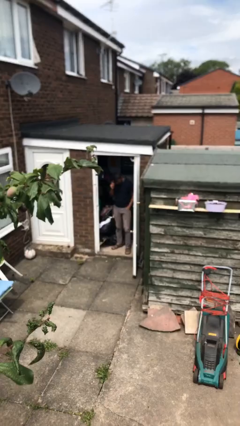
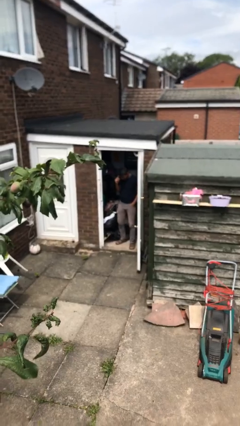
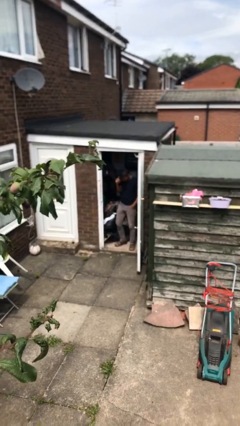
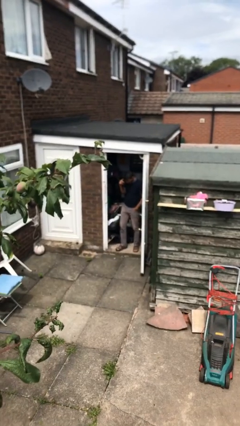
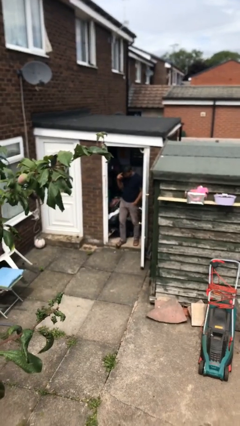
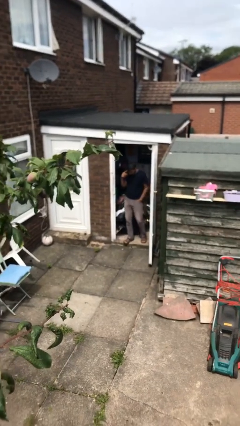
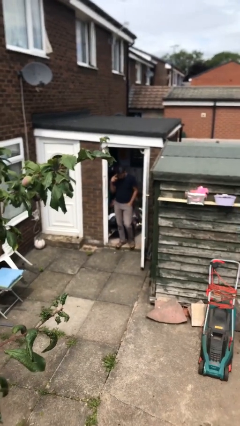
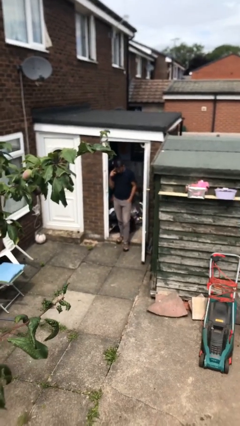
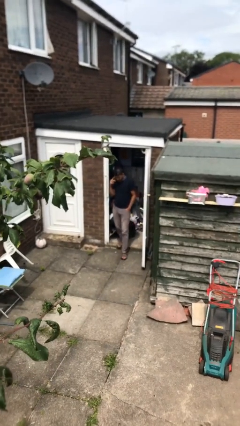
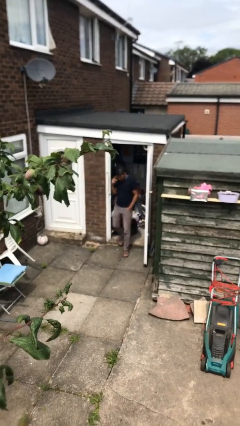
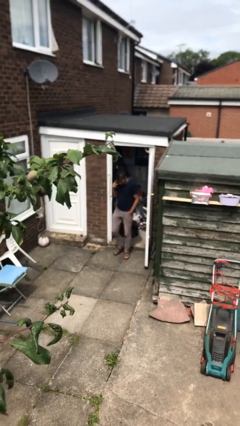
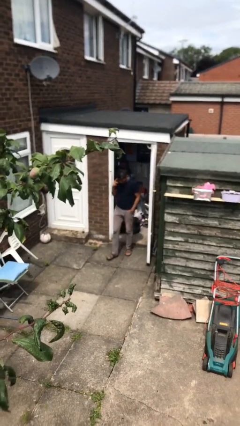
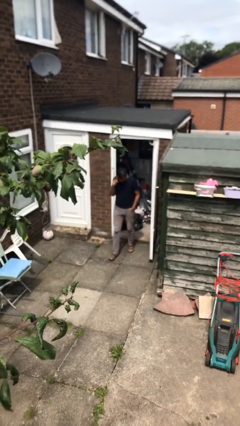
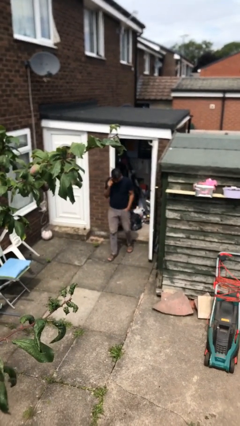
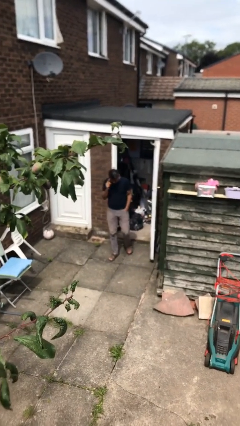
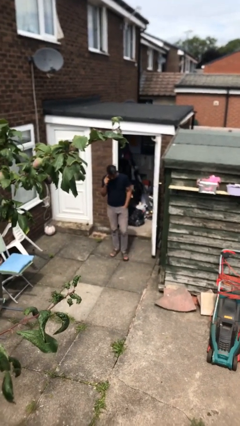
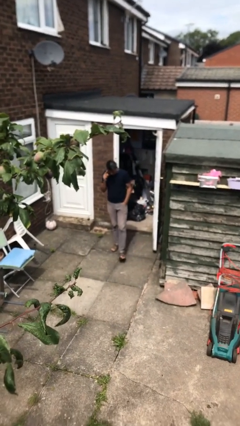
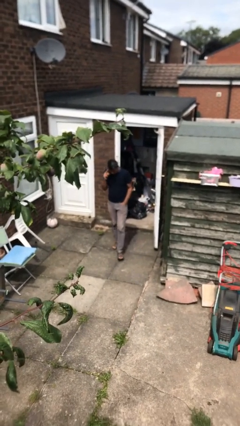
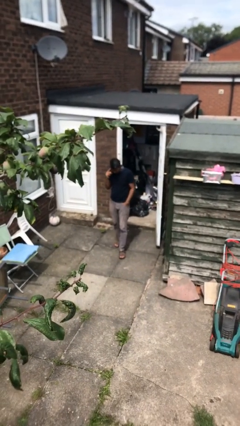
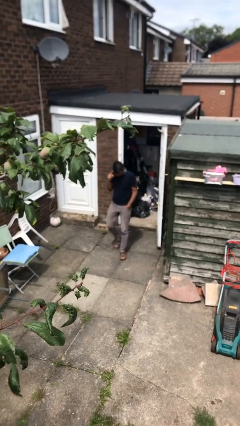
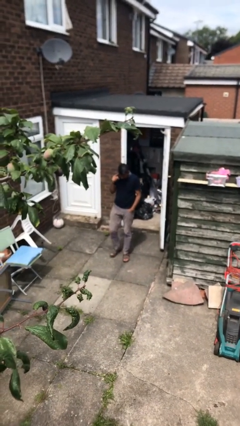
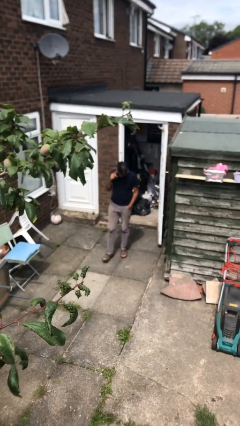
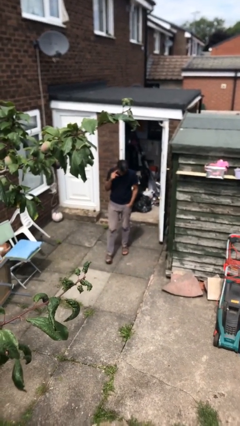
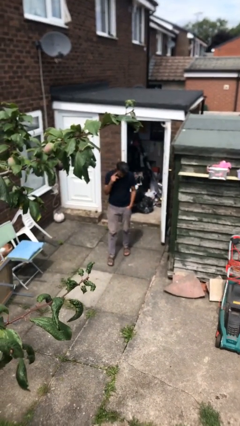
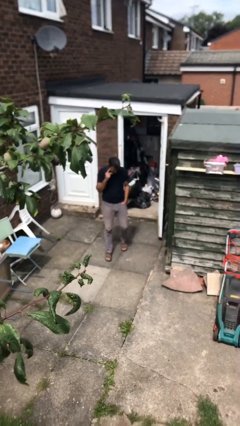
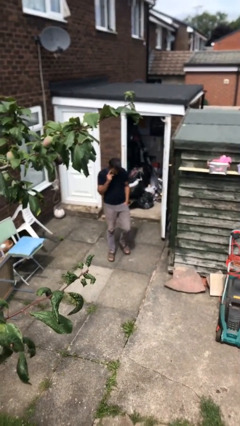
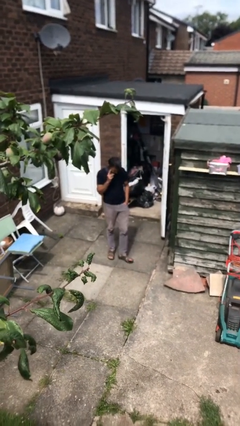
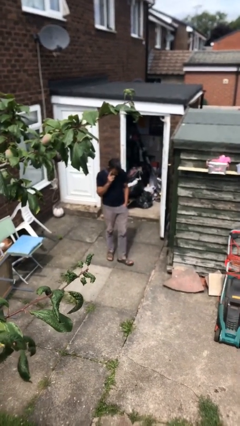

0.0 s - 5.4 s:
person enters scene through structure

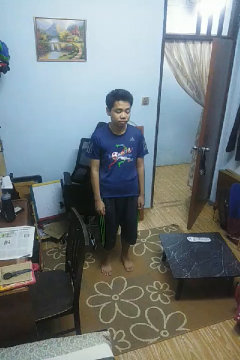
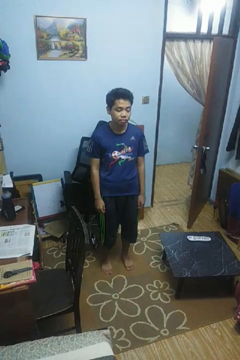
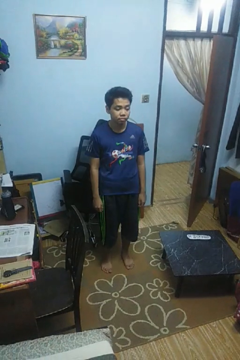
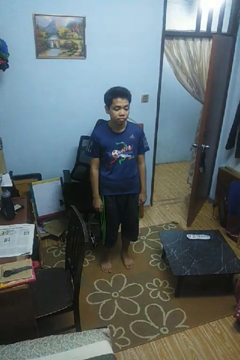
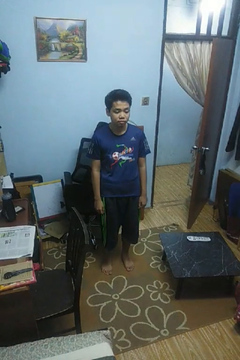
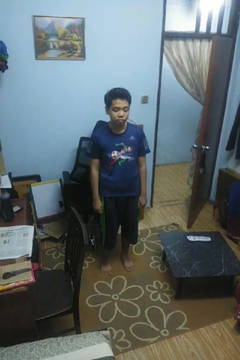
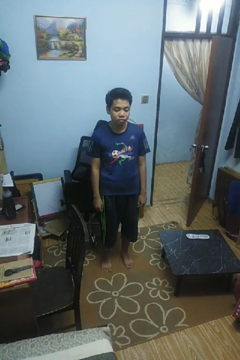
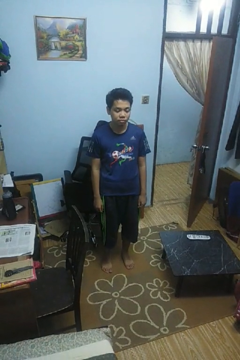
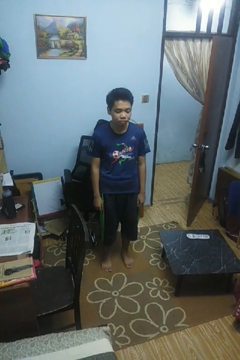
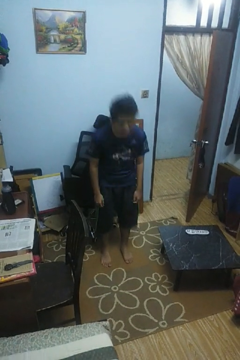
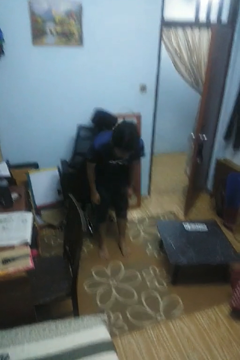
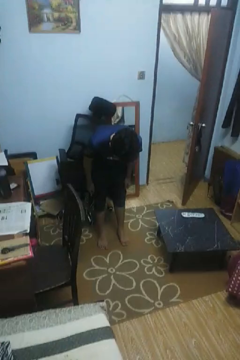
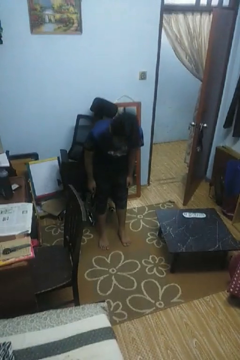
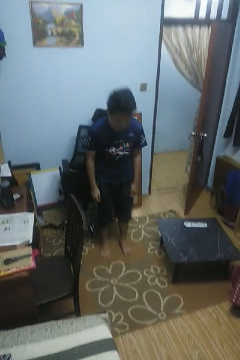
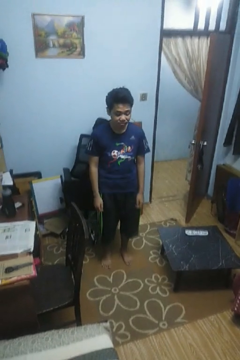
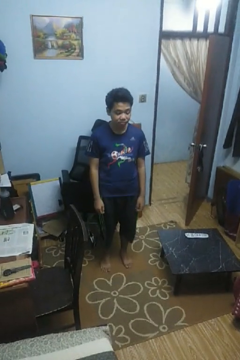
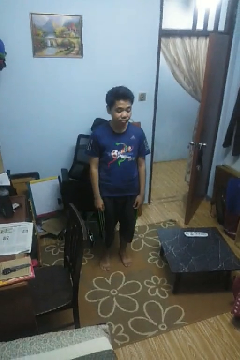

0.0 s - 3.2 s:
person bows

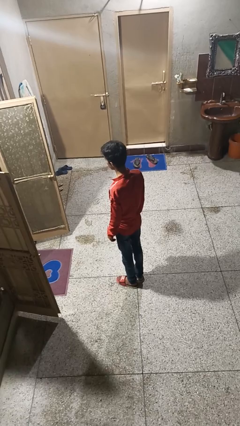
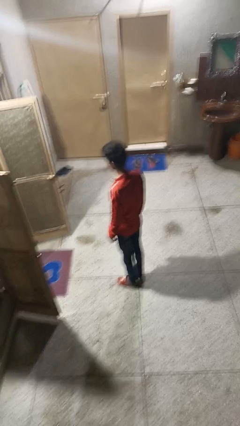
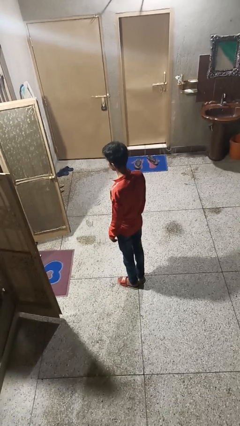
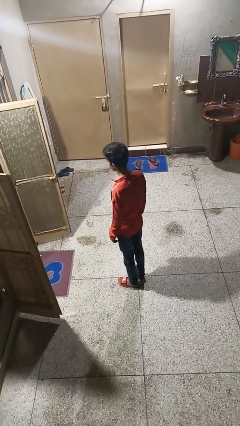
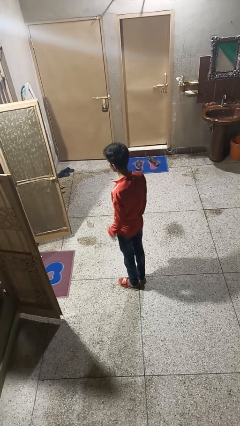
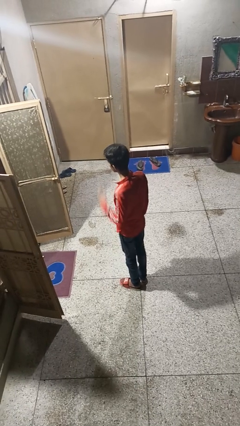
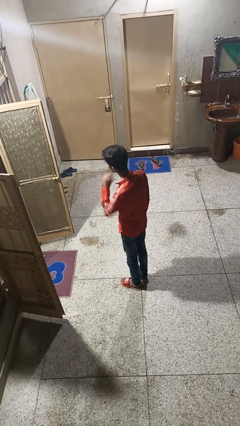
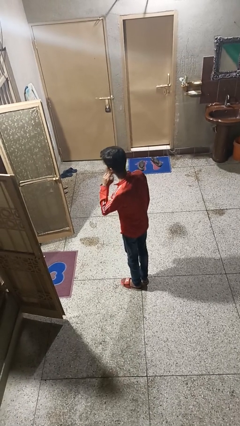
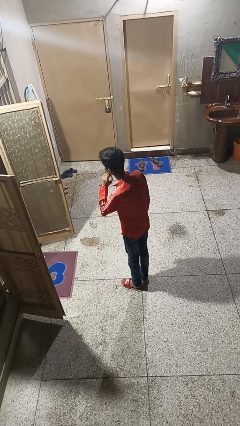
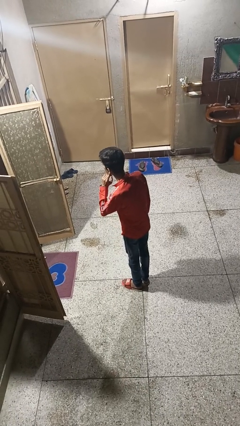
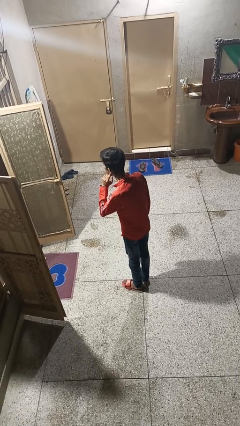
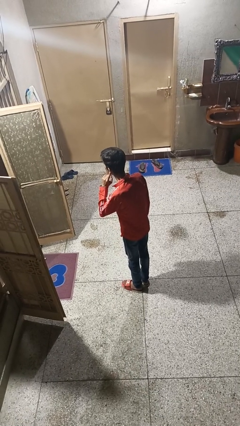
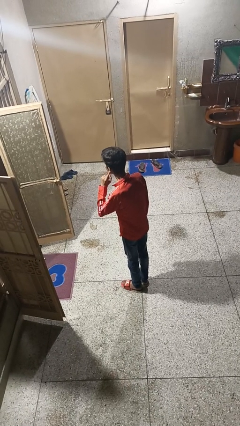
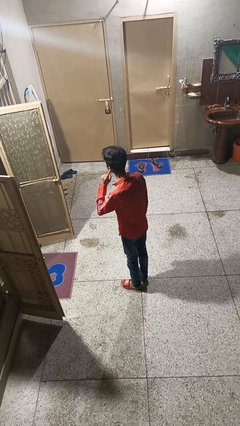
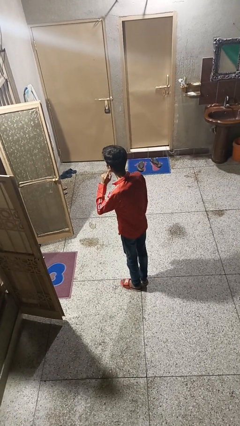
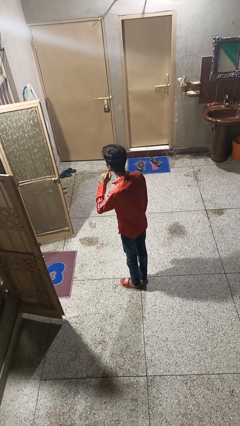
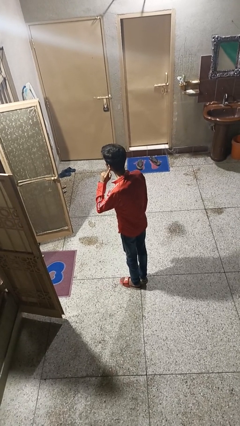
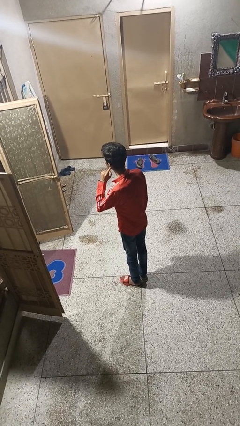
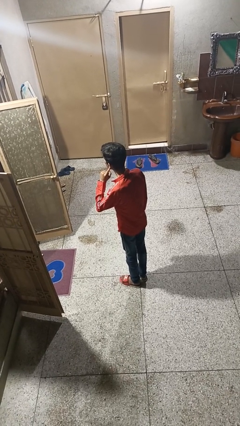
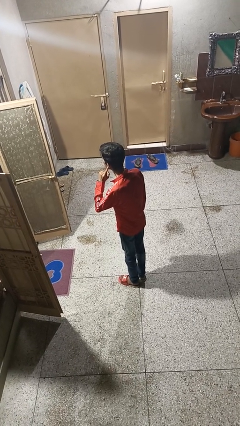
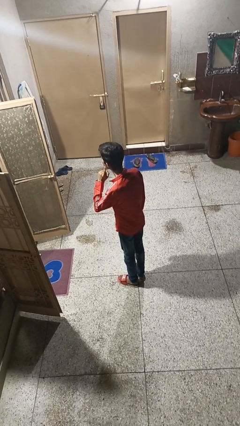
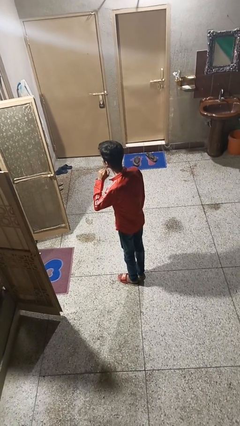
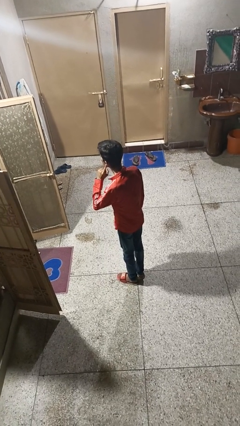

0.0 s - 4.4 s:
person gestures listen closely

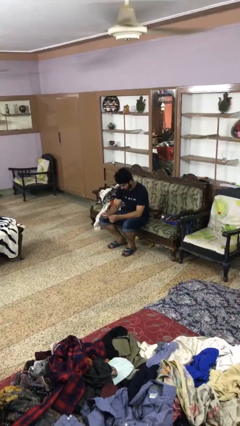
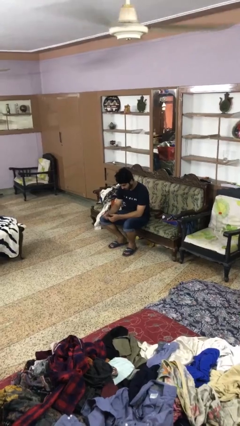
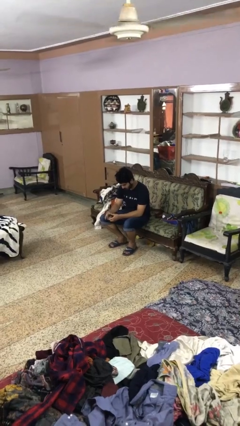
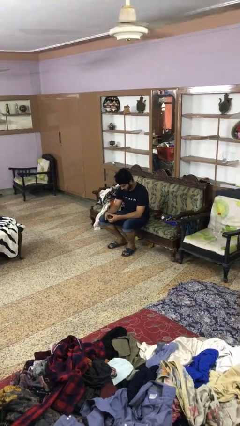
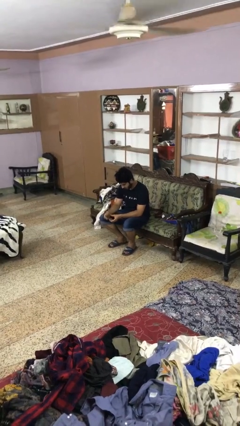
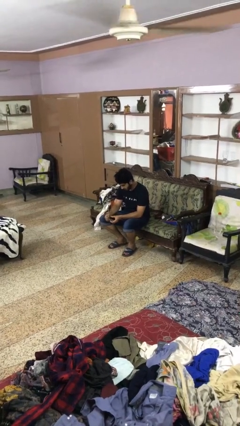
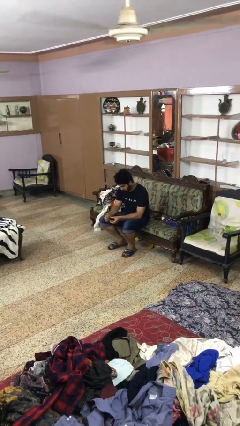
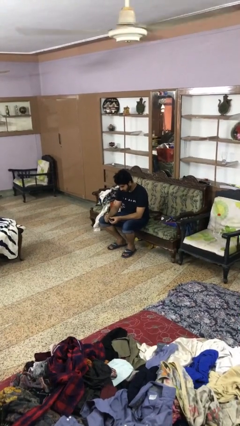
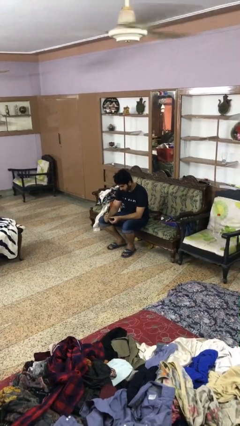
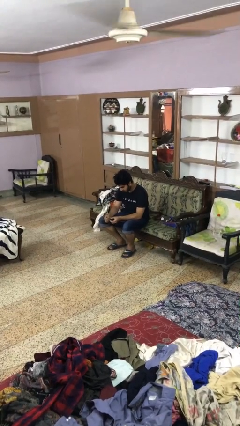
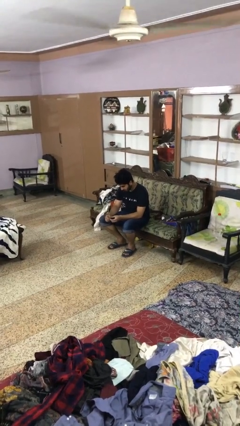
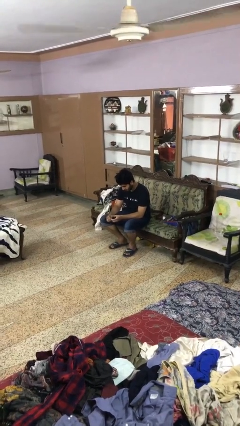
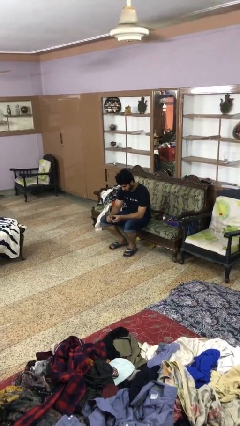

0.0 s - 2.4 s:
person clips fingernails

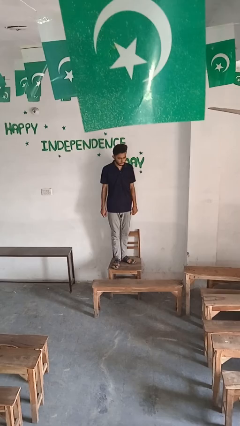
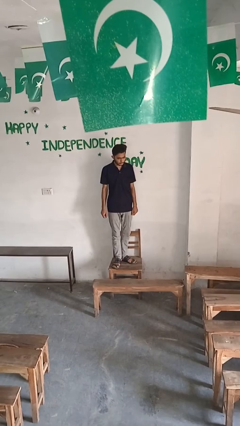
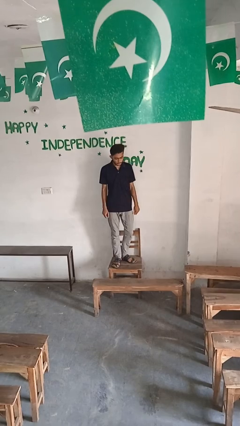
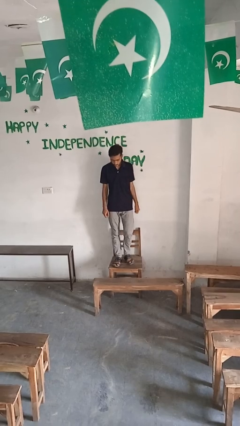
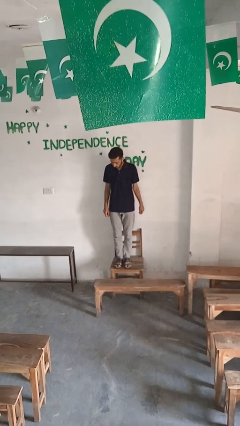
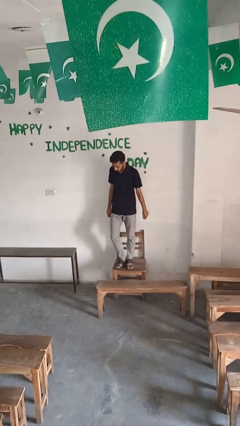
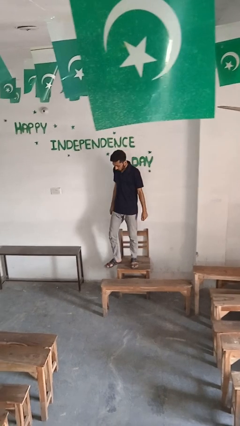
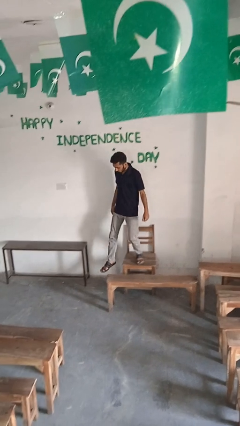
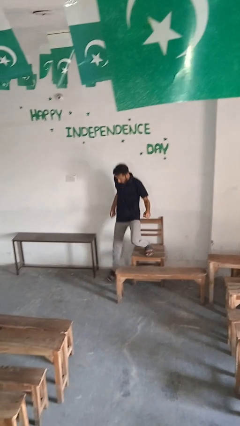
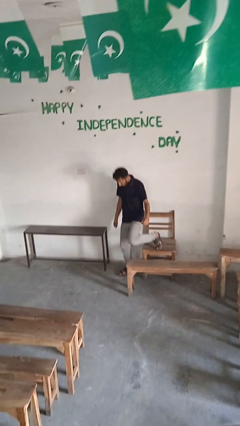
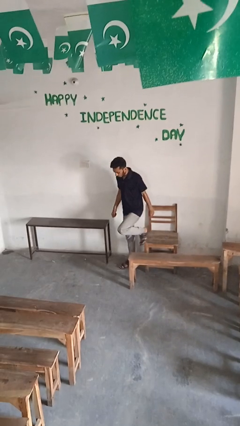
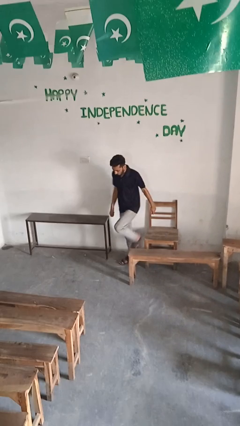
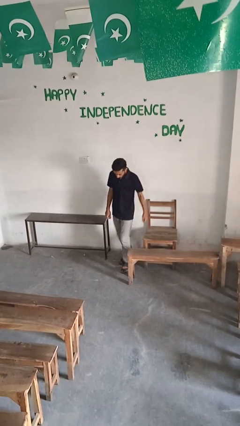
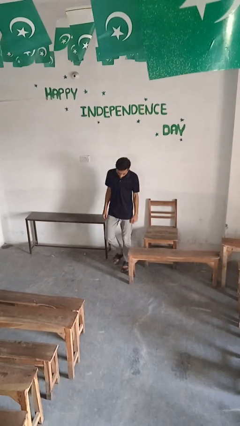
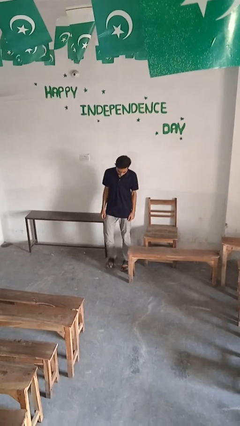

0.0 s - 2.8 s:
person climbs off chair

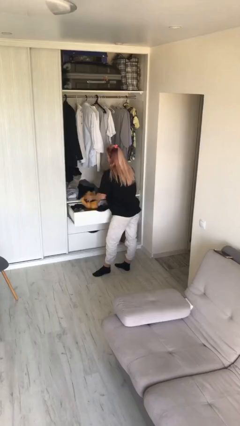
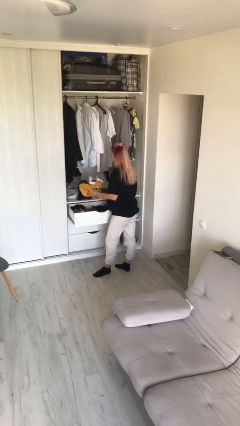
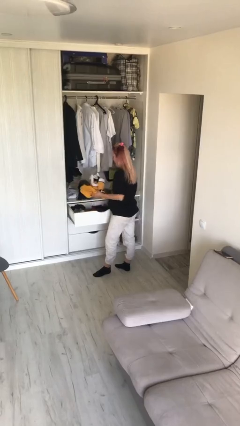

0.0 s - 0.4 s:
person takes clothes from dresser
